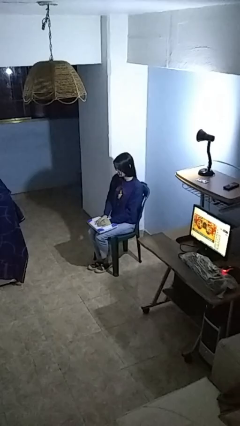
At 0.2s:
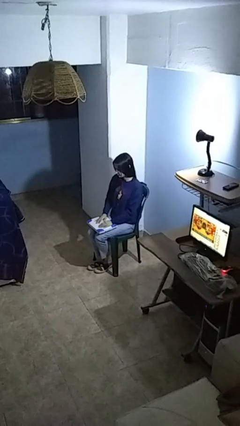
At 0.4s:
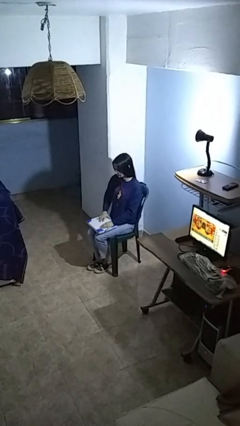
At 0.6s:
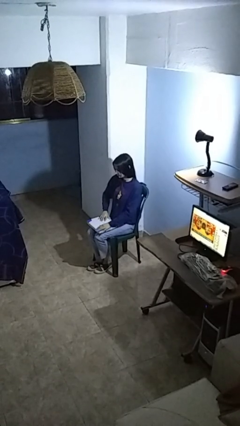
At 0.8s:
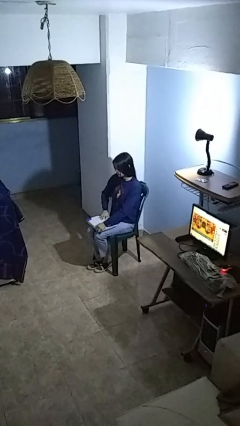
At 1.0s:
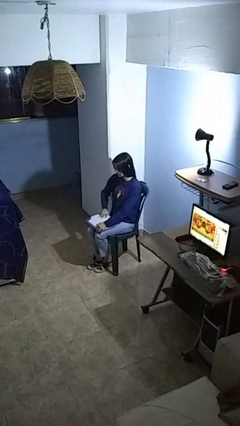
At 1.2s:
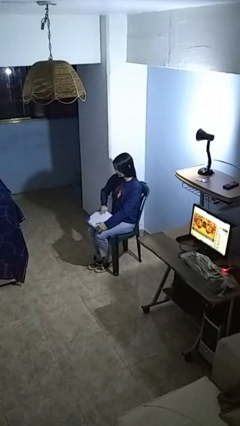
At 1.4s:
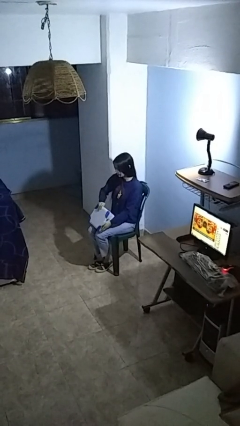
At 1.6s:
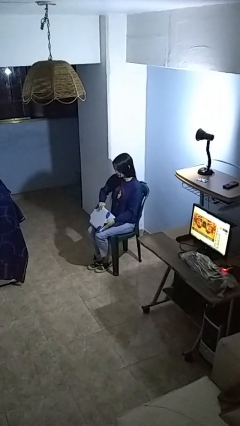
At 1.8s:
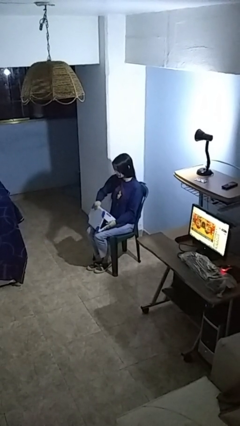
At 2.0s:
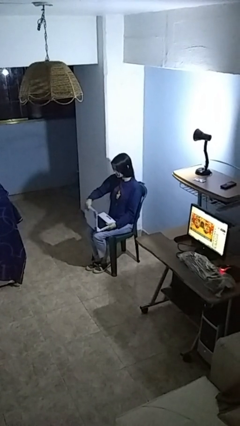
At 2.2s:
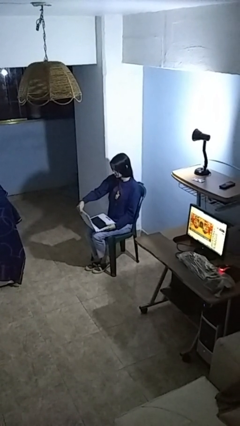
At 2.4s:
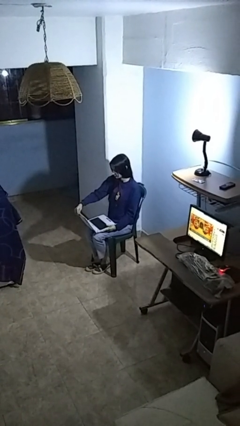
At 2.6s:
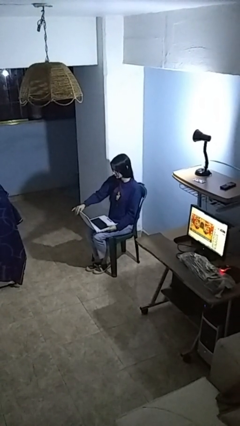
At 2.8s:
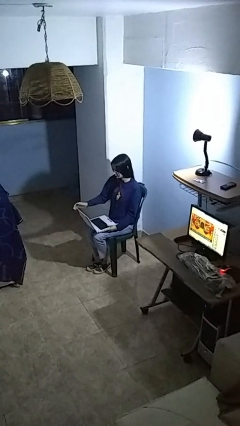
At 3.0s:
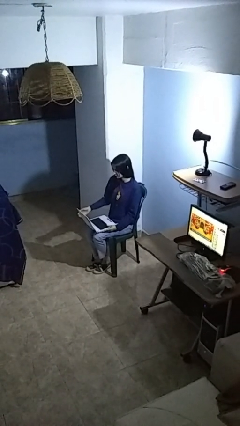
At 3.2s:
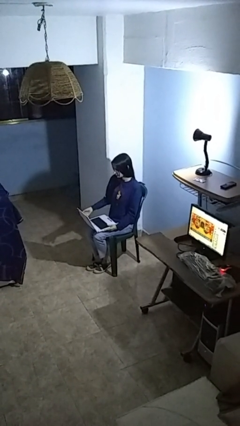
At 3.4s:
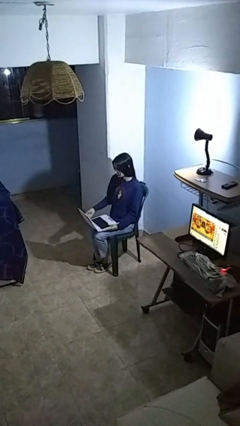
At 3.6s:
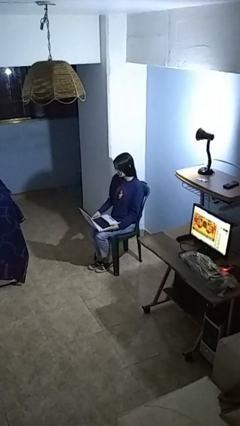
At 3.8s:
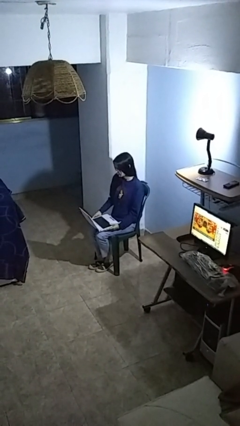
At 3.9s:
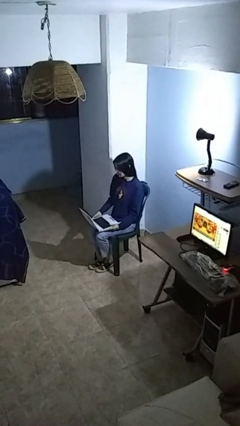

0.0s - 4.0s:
person opens laptop

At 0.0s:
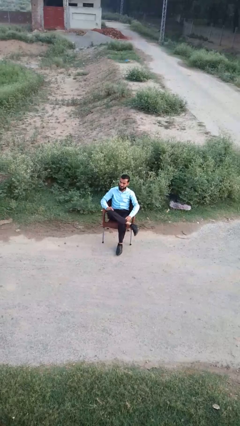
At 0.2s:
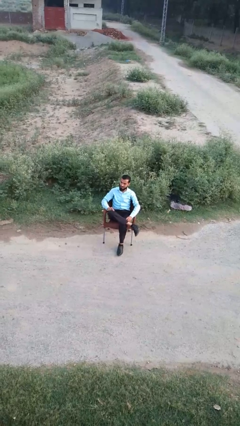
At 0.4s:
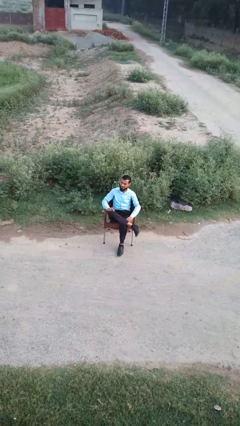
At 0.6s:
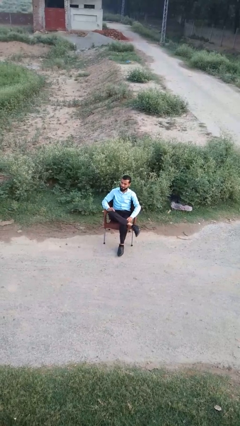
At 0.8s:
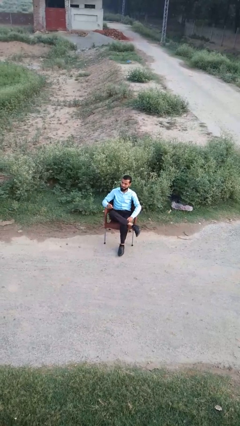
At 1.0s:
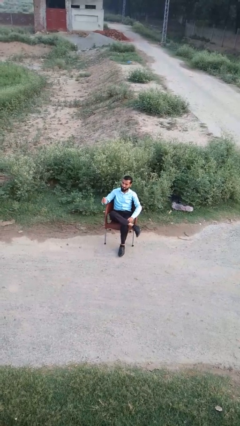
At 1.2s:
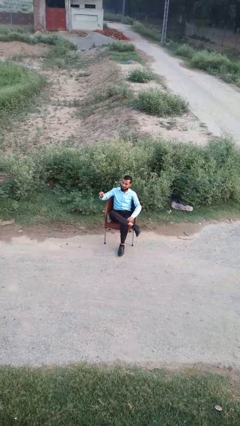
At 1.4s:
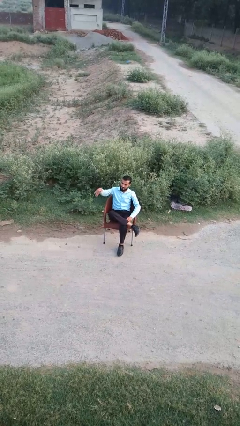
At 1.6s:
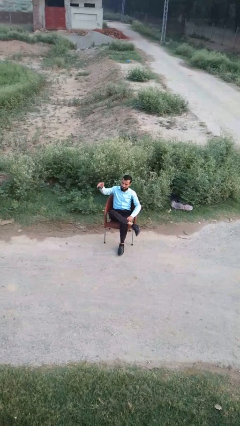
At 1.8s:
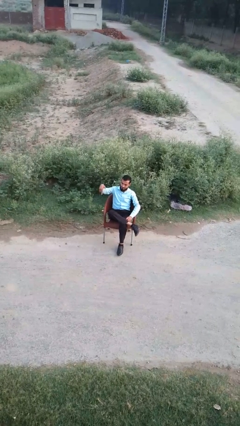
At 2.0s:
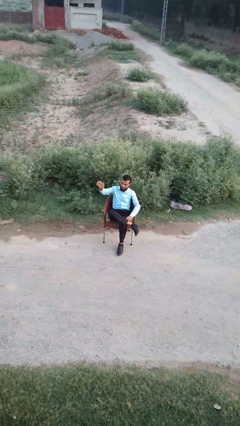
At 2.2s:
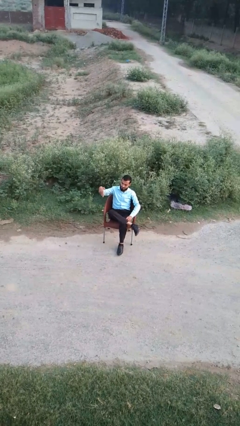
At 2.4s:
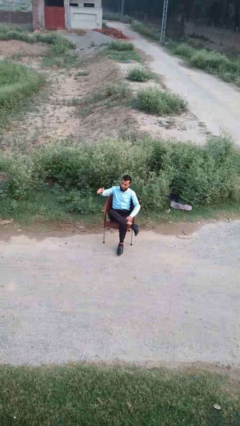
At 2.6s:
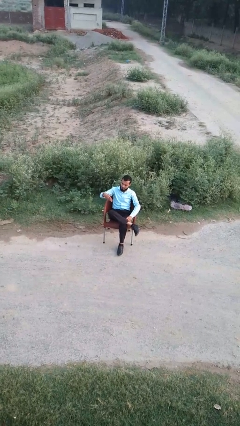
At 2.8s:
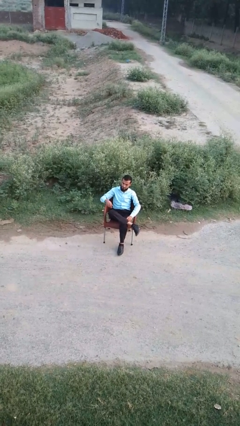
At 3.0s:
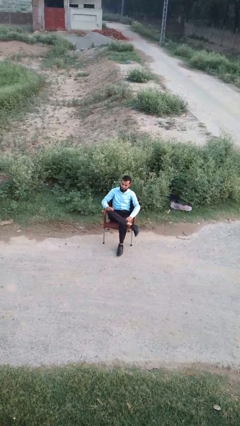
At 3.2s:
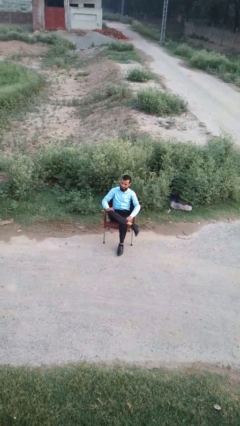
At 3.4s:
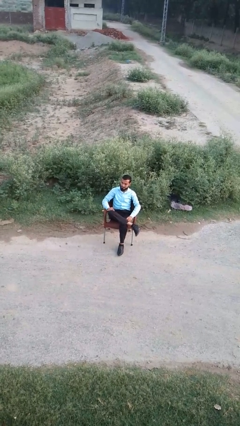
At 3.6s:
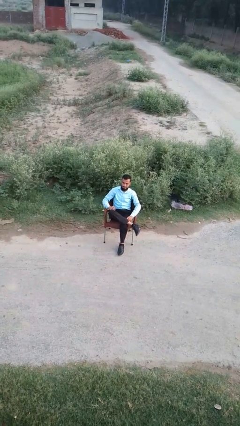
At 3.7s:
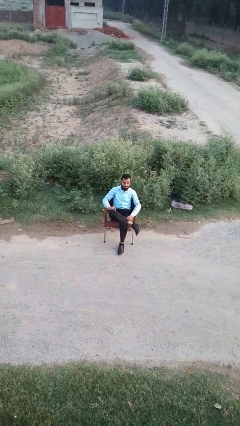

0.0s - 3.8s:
person gestures come here

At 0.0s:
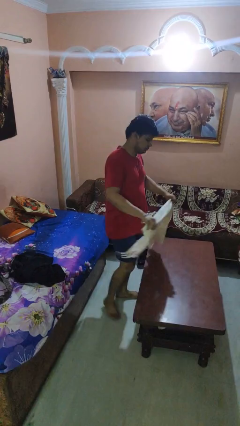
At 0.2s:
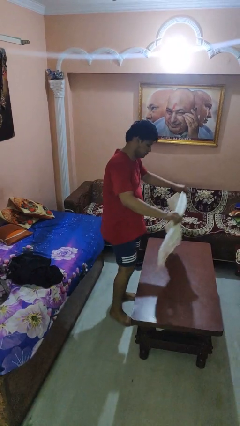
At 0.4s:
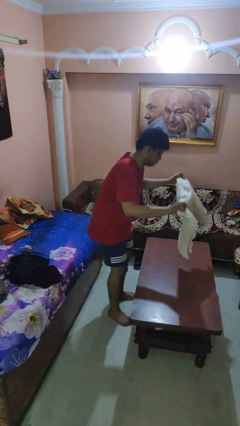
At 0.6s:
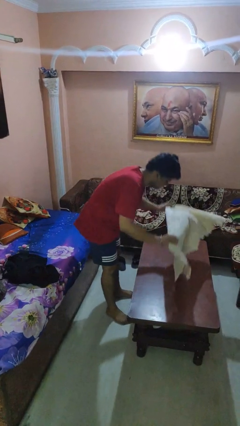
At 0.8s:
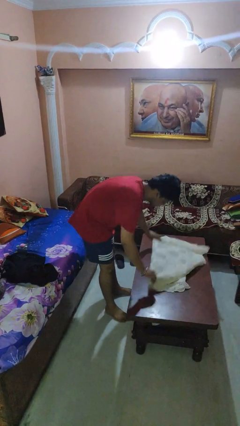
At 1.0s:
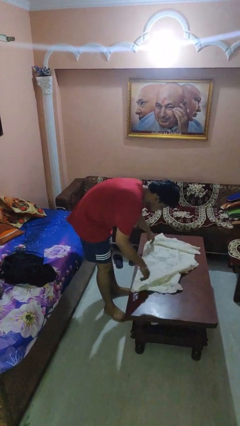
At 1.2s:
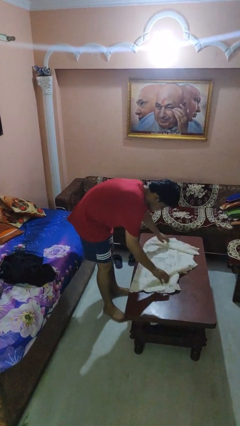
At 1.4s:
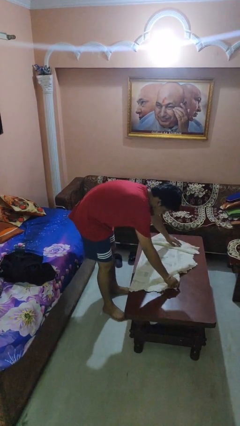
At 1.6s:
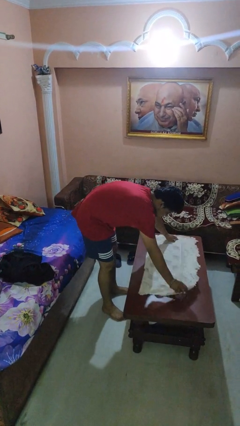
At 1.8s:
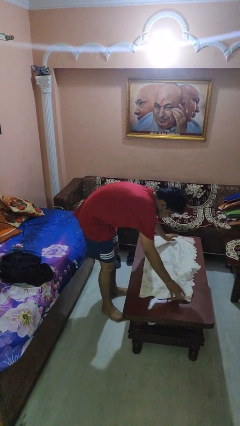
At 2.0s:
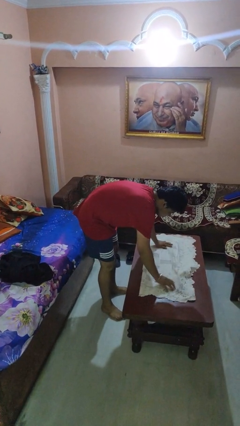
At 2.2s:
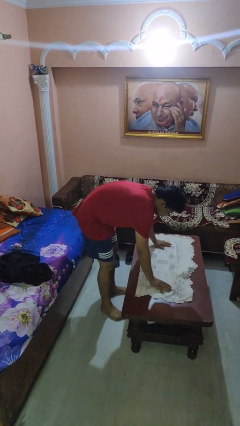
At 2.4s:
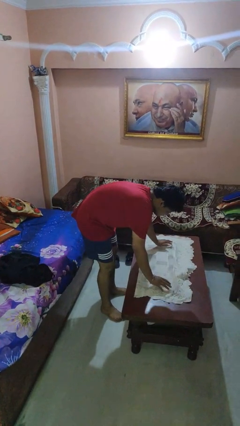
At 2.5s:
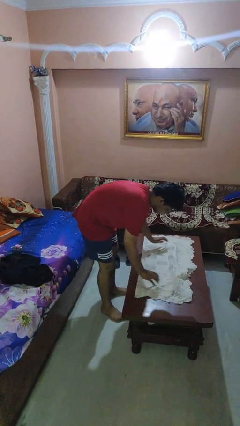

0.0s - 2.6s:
person spreads tablecloth

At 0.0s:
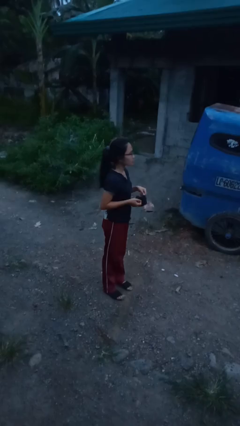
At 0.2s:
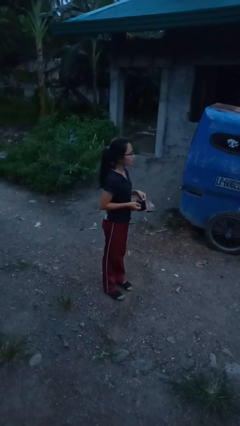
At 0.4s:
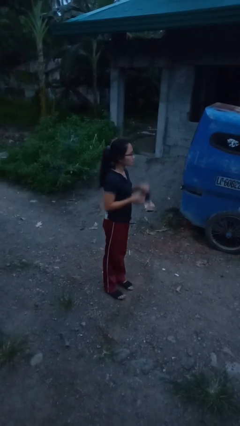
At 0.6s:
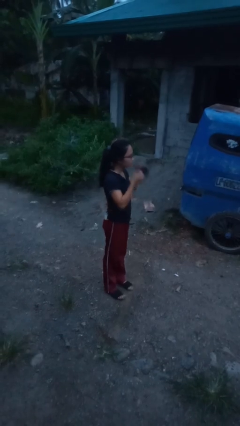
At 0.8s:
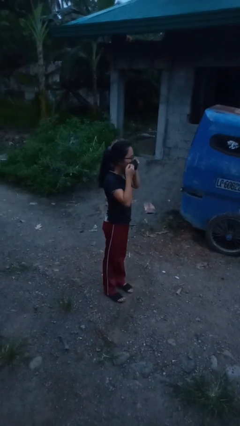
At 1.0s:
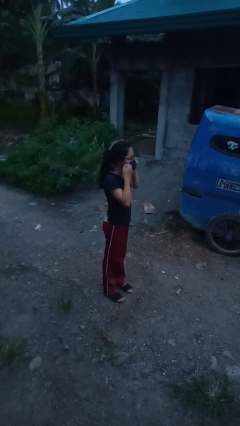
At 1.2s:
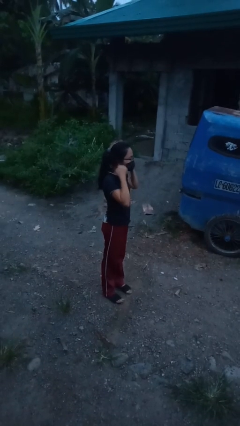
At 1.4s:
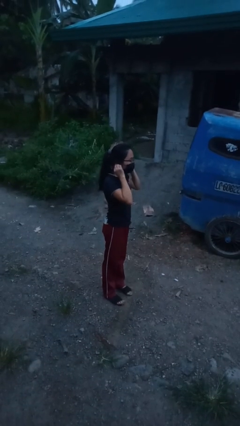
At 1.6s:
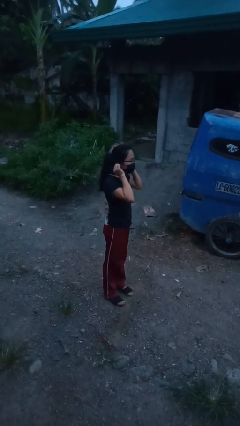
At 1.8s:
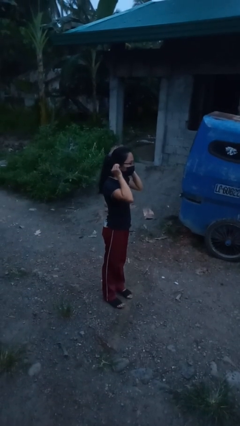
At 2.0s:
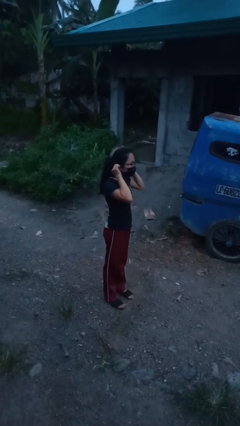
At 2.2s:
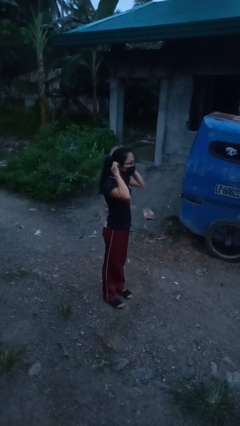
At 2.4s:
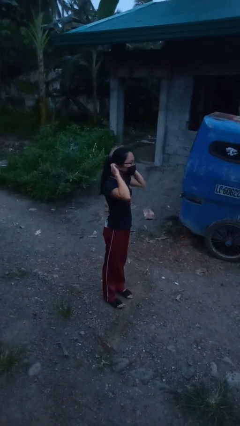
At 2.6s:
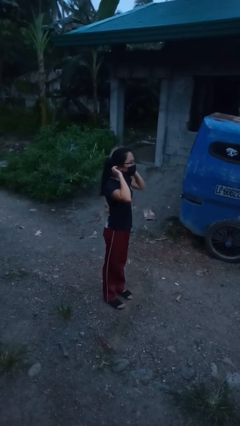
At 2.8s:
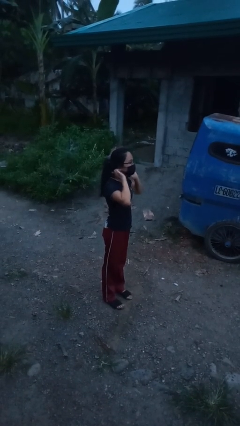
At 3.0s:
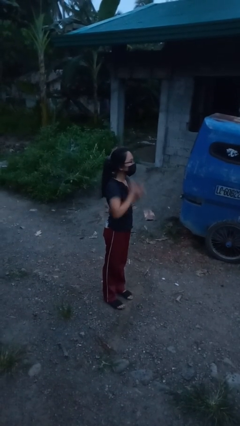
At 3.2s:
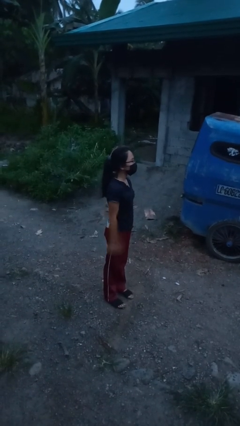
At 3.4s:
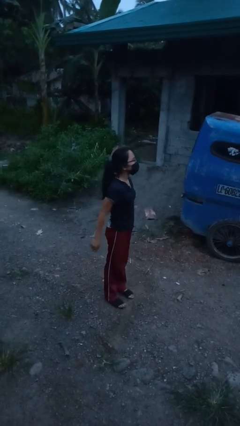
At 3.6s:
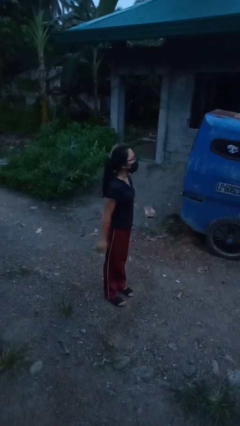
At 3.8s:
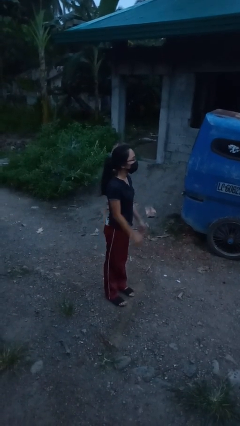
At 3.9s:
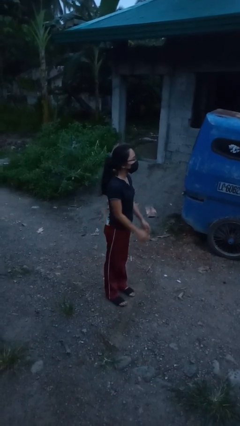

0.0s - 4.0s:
person puts on facemask

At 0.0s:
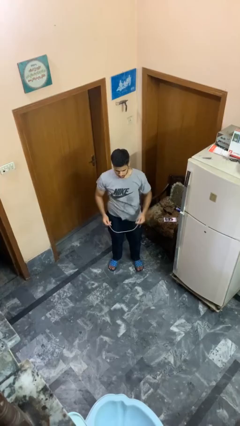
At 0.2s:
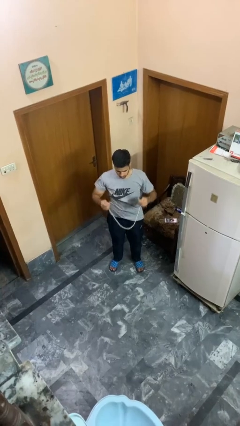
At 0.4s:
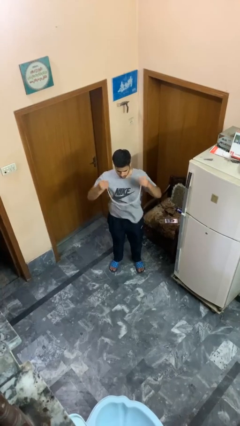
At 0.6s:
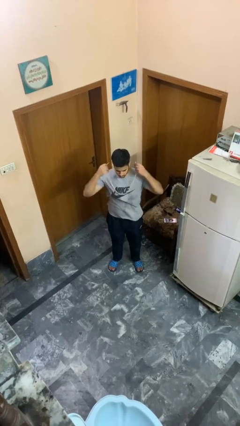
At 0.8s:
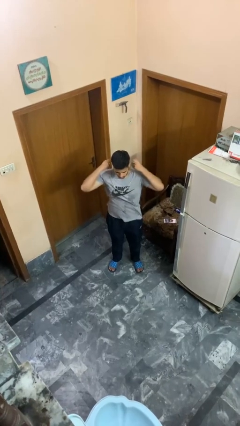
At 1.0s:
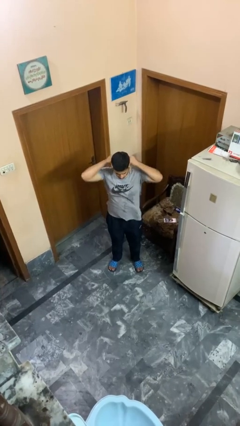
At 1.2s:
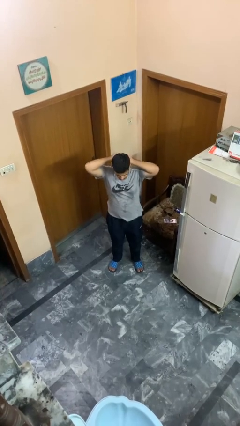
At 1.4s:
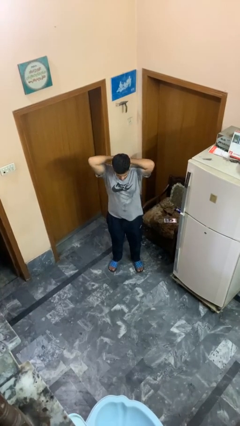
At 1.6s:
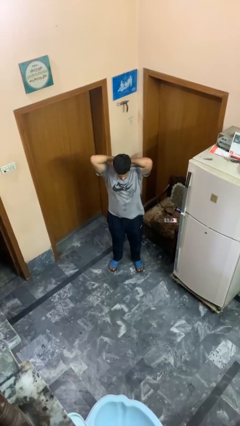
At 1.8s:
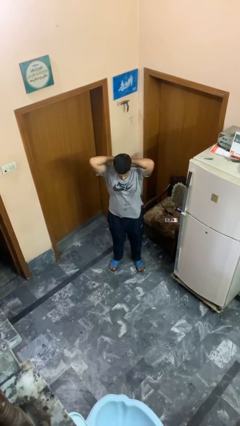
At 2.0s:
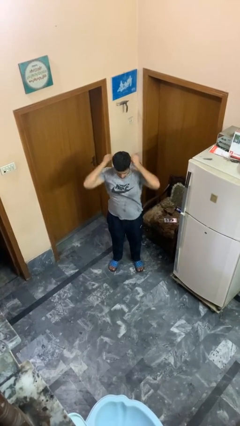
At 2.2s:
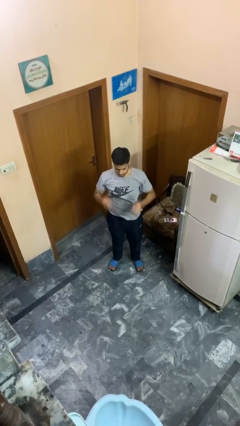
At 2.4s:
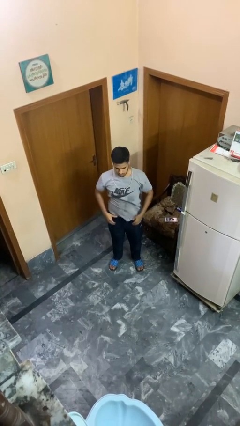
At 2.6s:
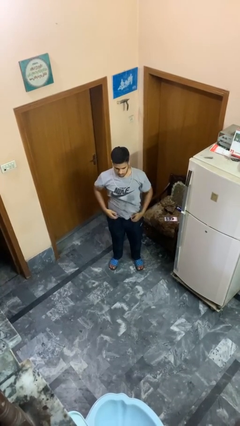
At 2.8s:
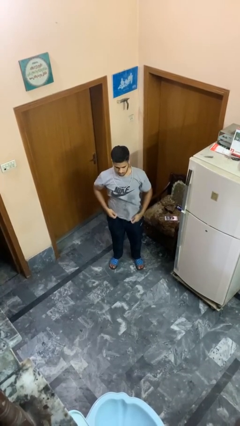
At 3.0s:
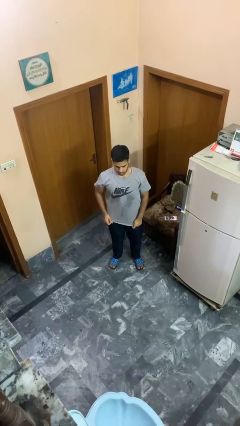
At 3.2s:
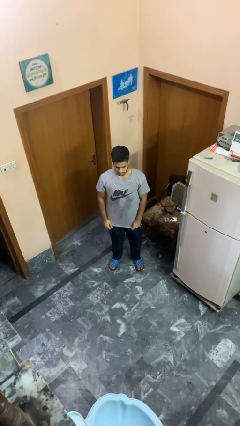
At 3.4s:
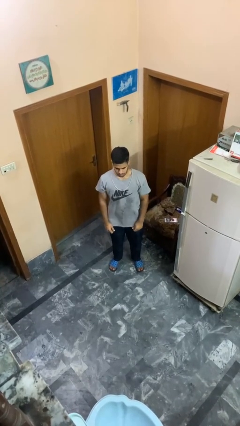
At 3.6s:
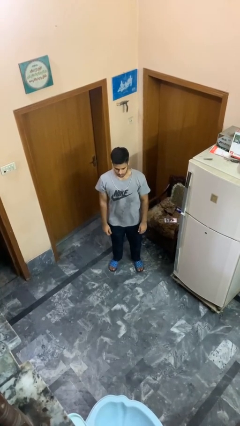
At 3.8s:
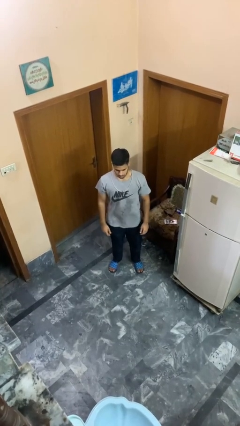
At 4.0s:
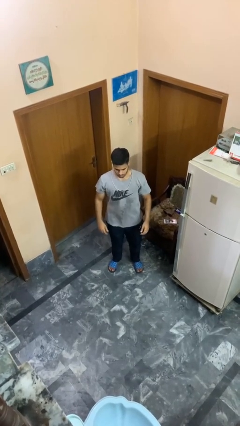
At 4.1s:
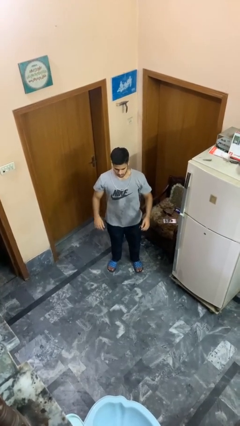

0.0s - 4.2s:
person puts on necklace
